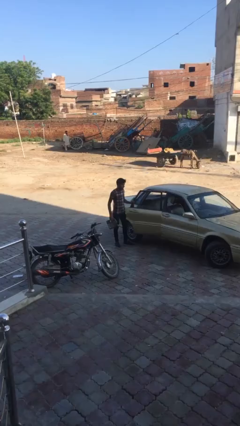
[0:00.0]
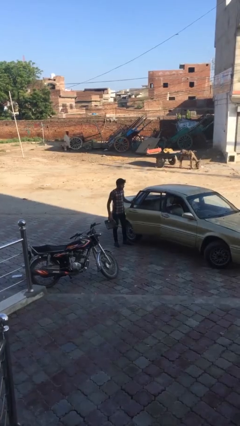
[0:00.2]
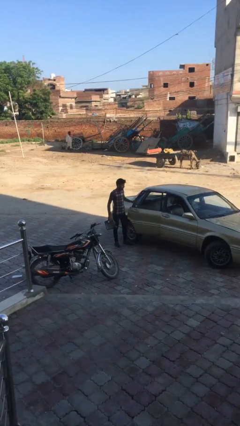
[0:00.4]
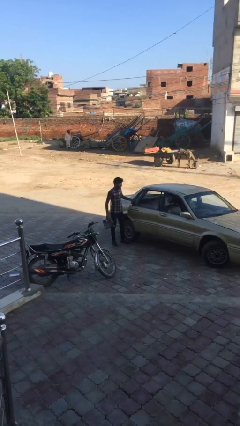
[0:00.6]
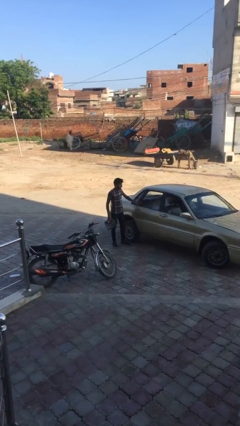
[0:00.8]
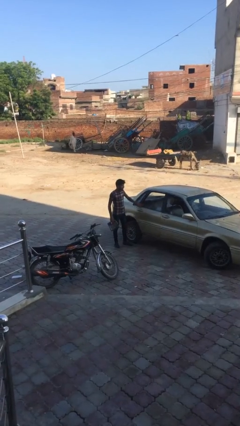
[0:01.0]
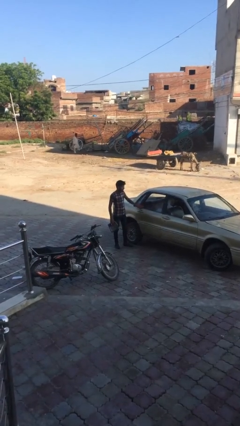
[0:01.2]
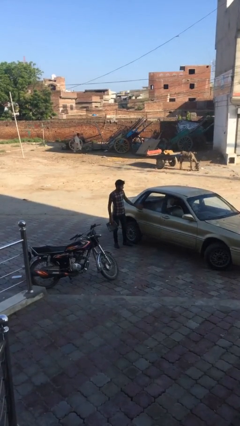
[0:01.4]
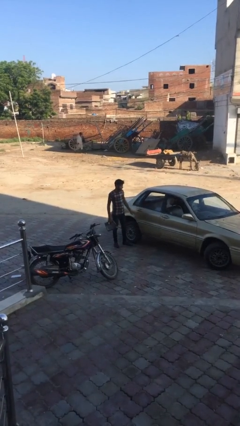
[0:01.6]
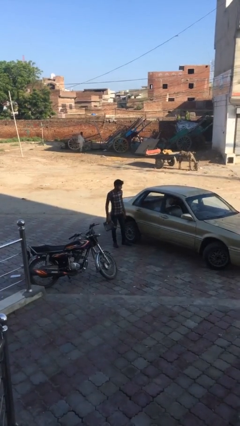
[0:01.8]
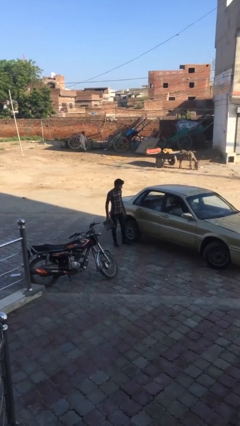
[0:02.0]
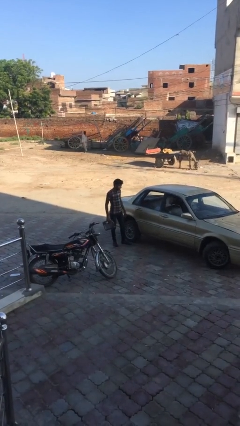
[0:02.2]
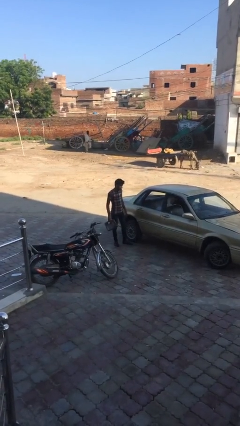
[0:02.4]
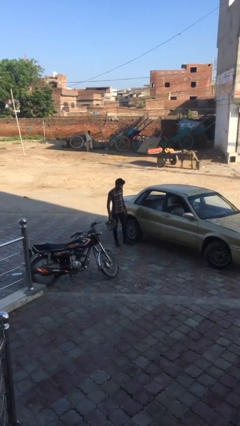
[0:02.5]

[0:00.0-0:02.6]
person closes car door

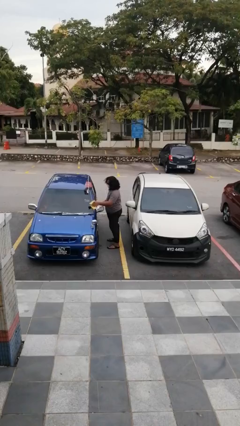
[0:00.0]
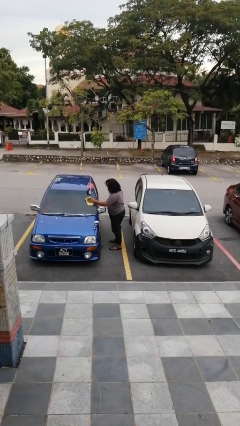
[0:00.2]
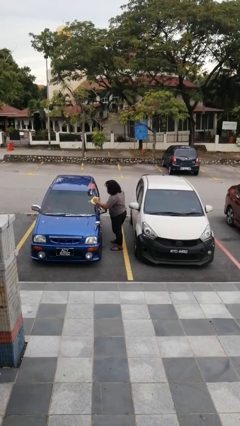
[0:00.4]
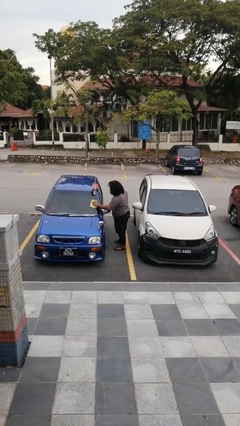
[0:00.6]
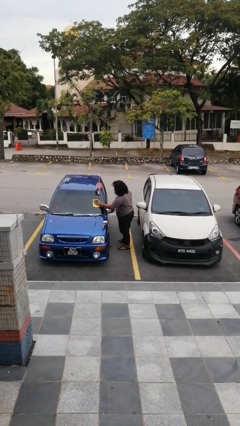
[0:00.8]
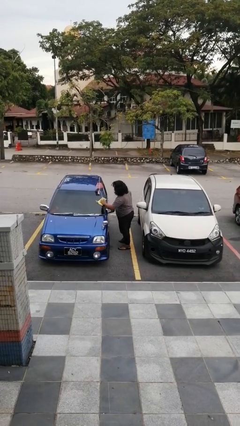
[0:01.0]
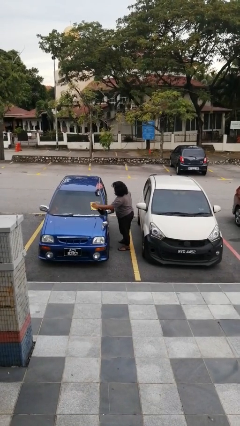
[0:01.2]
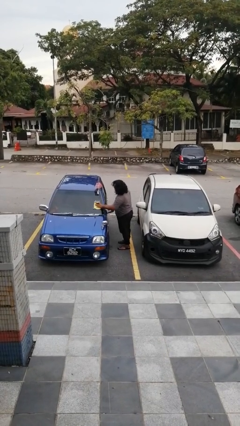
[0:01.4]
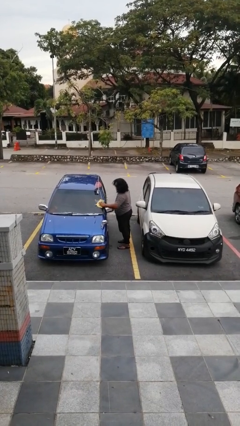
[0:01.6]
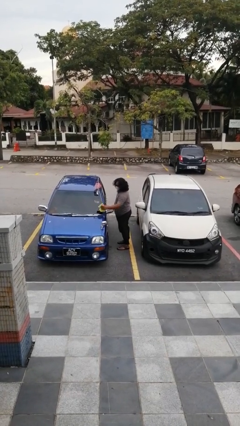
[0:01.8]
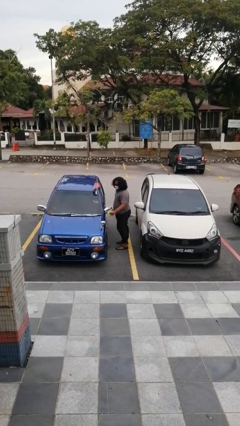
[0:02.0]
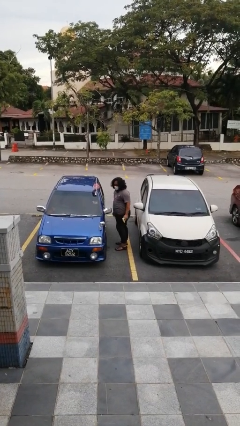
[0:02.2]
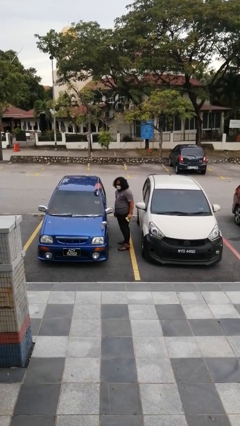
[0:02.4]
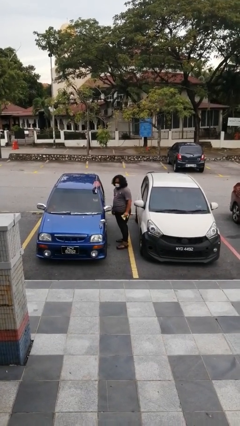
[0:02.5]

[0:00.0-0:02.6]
person polishes car with rag

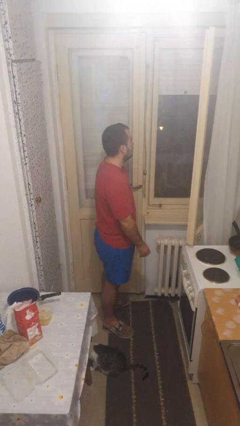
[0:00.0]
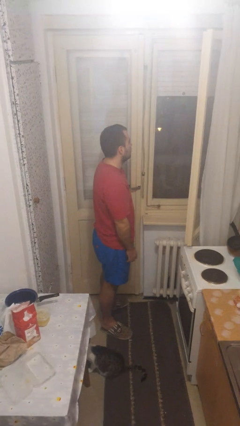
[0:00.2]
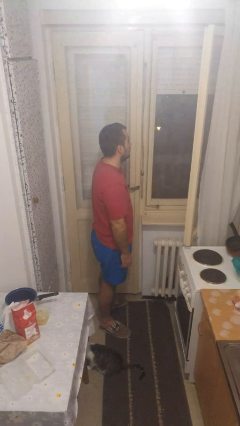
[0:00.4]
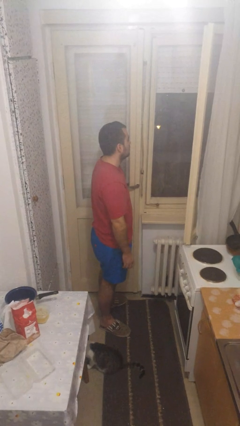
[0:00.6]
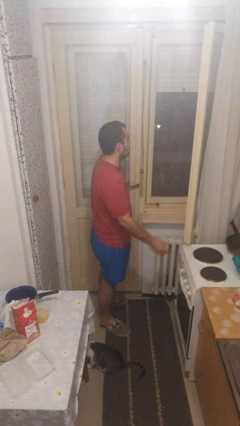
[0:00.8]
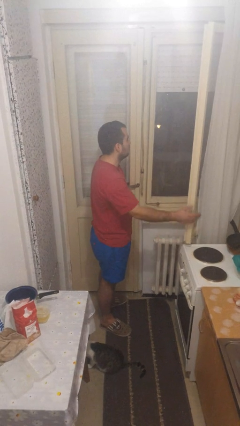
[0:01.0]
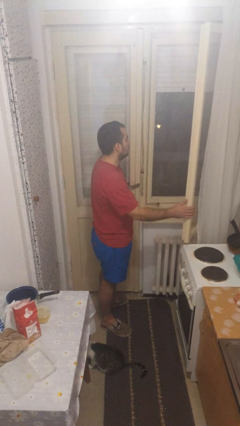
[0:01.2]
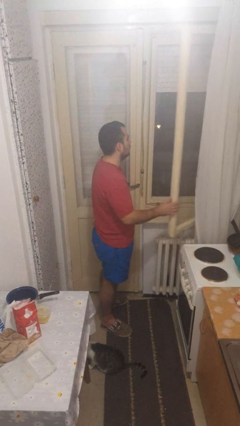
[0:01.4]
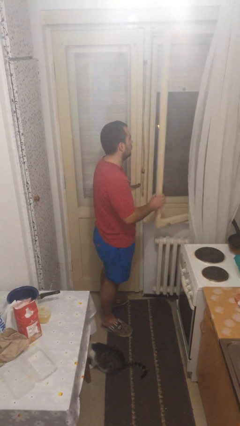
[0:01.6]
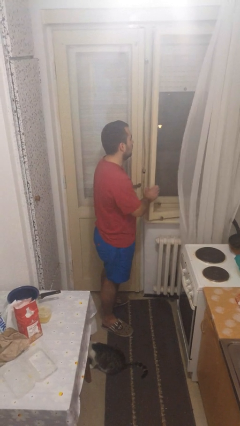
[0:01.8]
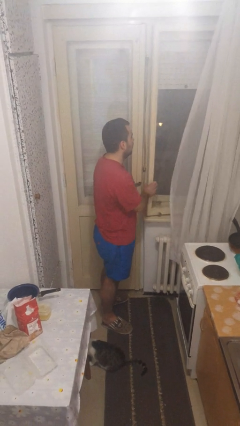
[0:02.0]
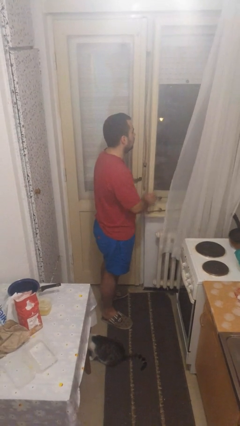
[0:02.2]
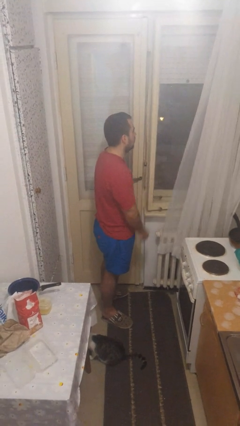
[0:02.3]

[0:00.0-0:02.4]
person closes home window

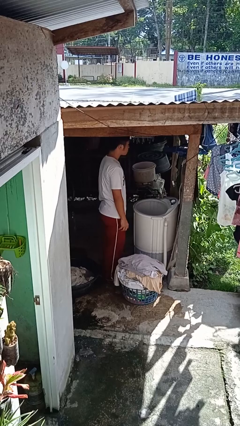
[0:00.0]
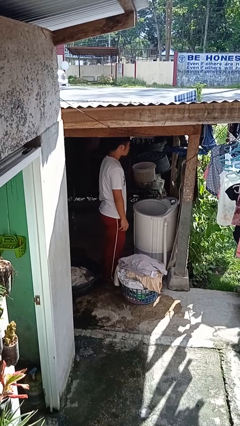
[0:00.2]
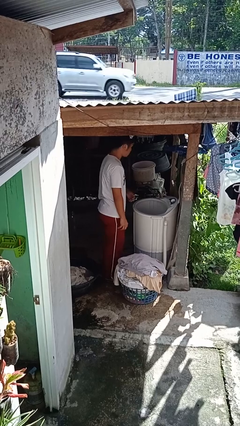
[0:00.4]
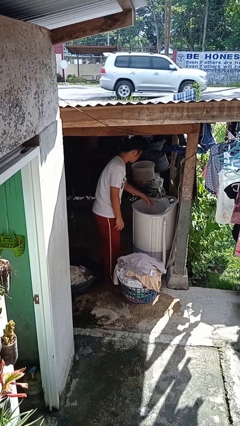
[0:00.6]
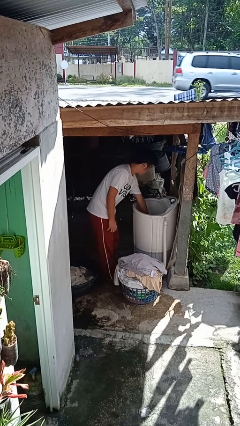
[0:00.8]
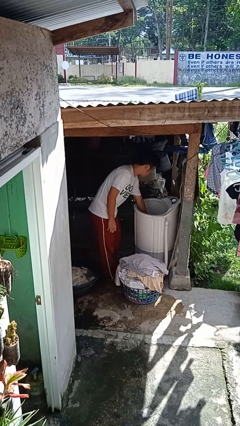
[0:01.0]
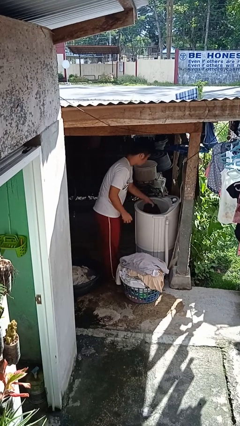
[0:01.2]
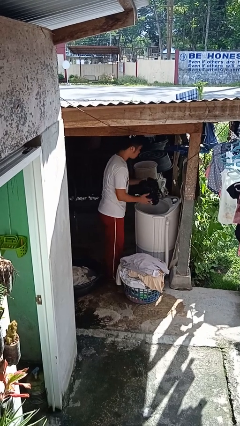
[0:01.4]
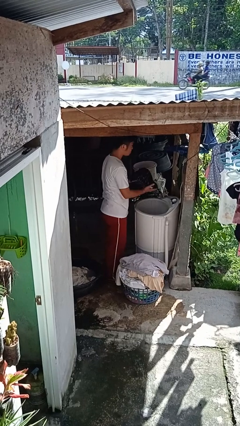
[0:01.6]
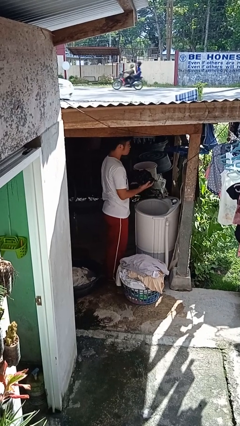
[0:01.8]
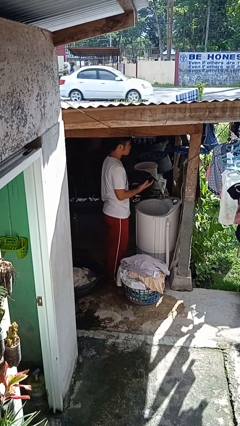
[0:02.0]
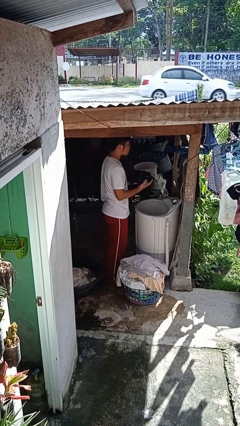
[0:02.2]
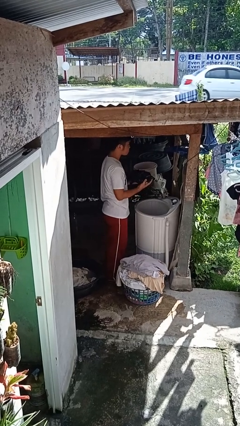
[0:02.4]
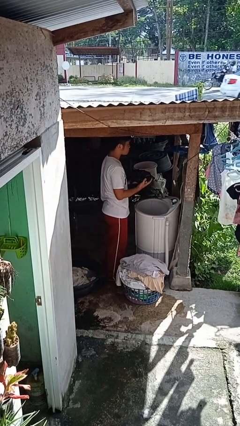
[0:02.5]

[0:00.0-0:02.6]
person unloads clotheswasher

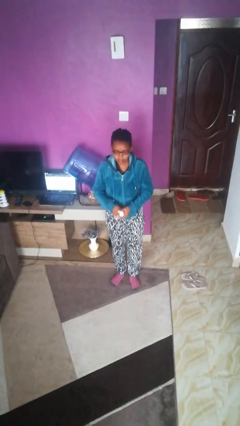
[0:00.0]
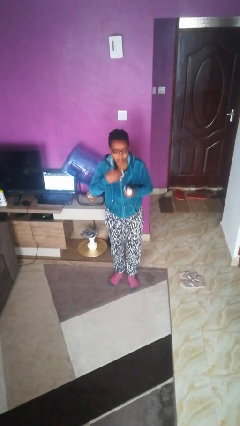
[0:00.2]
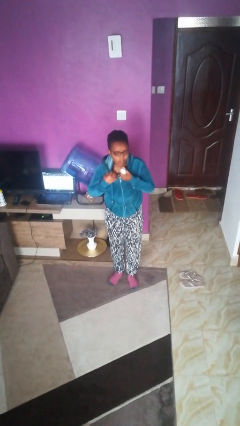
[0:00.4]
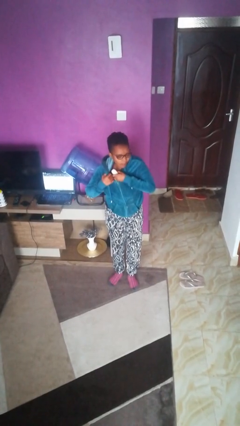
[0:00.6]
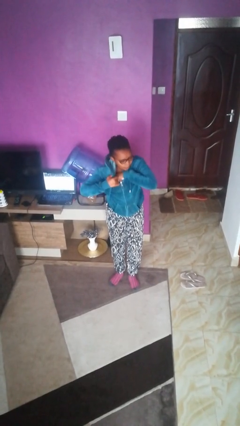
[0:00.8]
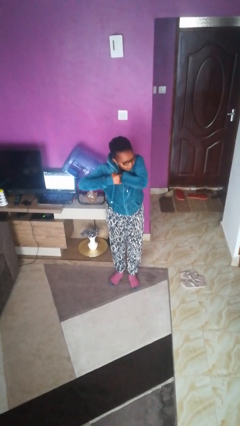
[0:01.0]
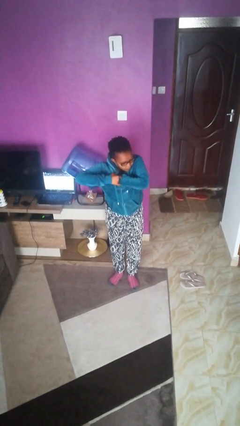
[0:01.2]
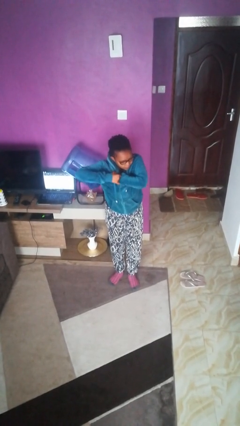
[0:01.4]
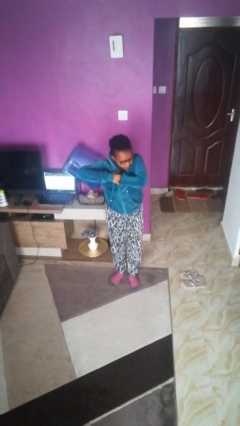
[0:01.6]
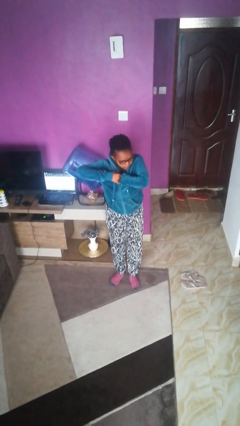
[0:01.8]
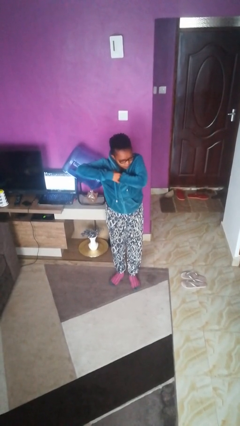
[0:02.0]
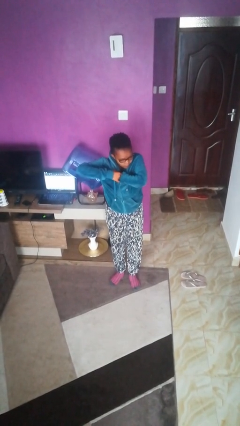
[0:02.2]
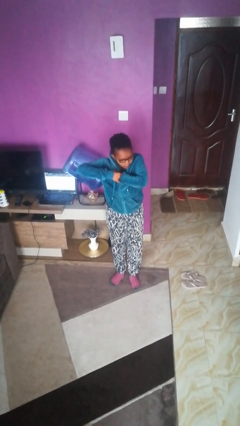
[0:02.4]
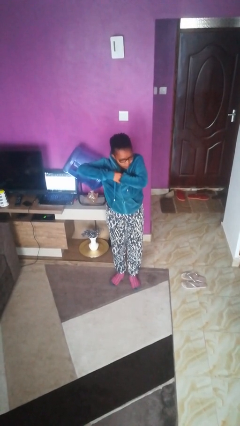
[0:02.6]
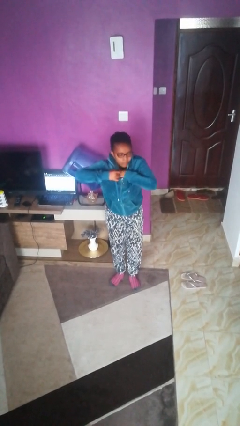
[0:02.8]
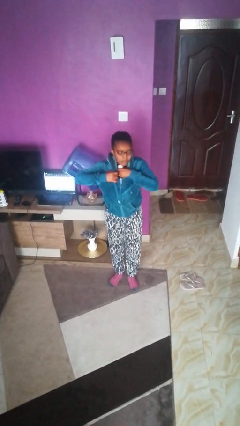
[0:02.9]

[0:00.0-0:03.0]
person applies deodorant

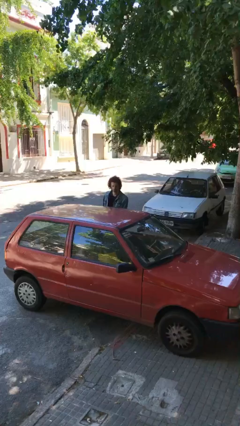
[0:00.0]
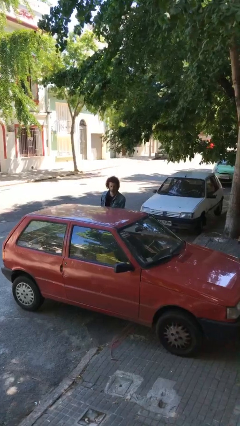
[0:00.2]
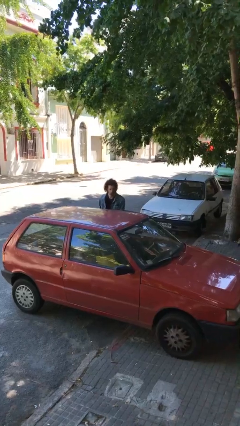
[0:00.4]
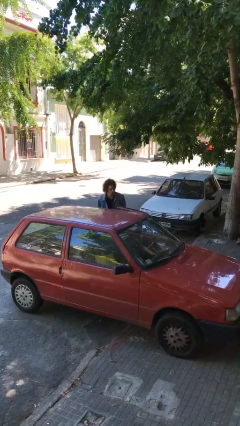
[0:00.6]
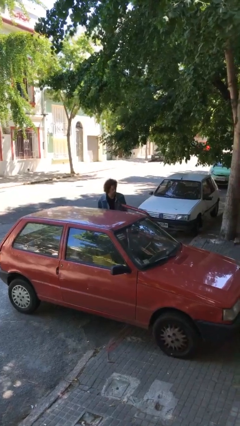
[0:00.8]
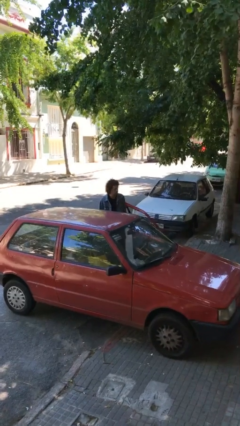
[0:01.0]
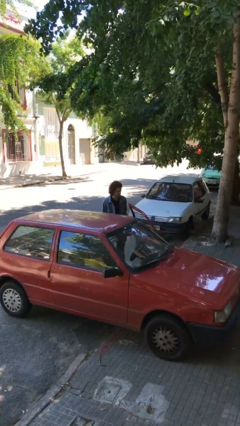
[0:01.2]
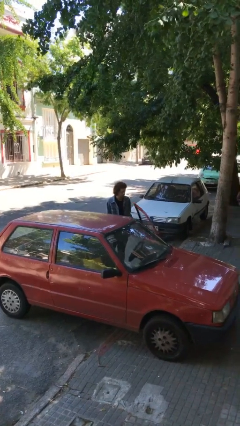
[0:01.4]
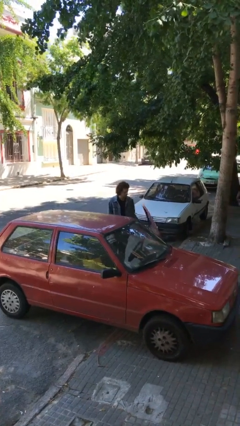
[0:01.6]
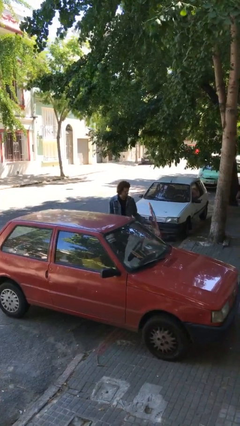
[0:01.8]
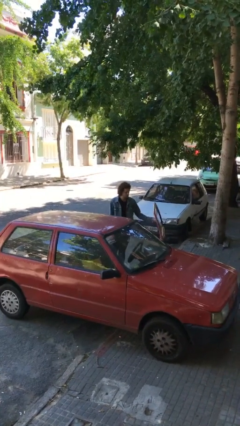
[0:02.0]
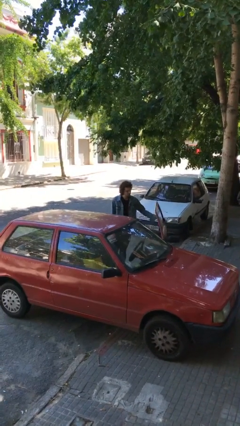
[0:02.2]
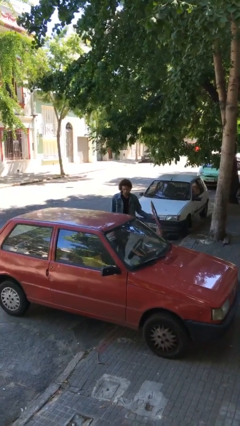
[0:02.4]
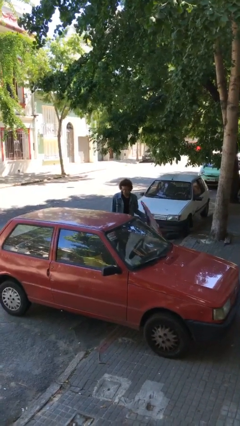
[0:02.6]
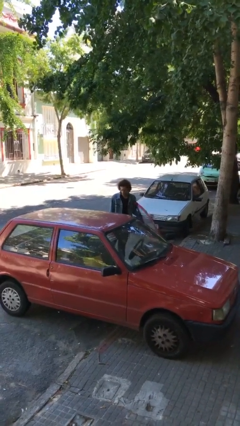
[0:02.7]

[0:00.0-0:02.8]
person opens car door

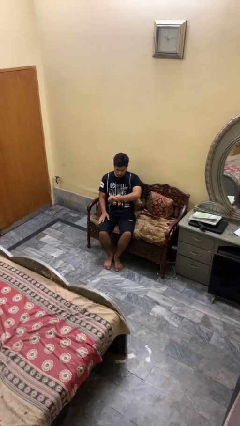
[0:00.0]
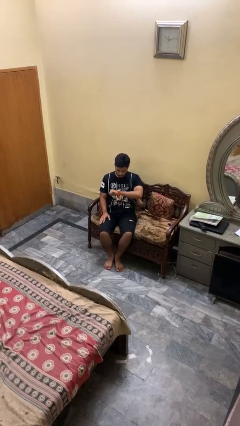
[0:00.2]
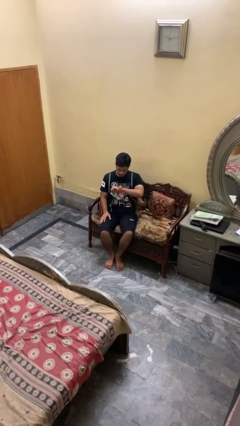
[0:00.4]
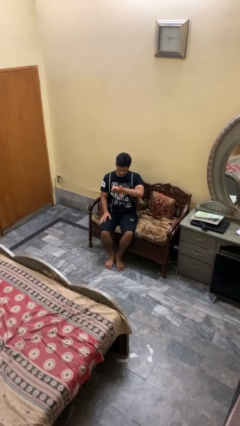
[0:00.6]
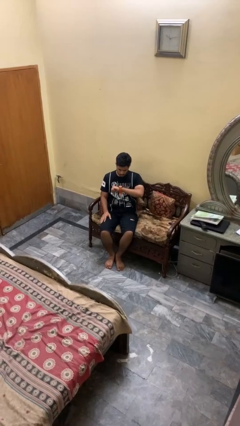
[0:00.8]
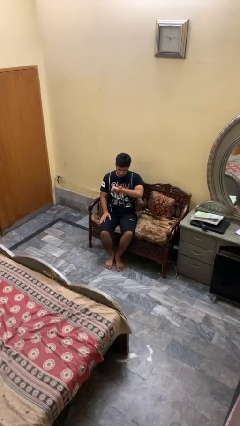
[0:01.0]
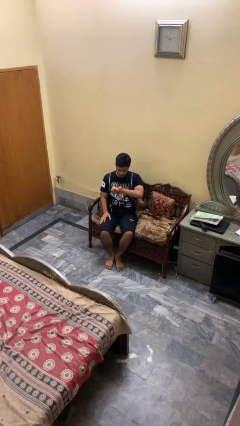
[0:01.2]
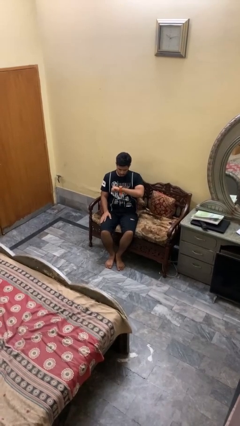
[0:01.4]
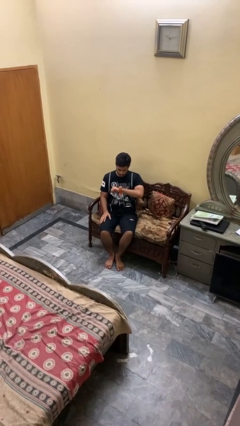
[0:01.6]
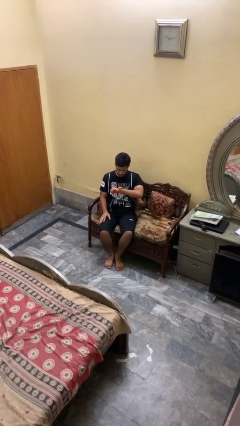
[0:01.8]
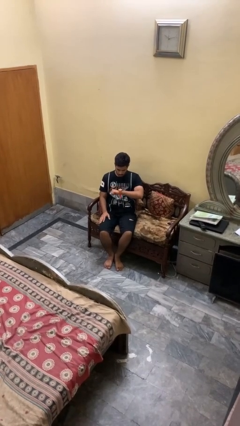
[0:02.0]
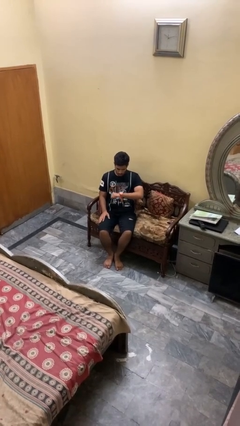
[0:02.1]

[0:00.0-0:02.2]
person looks at wristwatch
